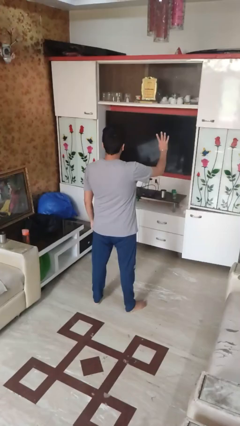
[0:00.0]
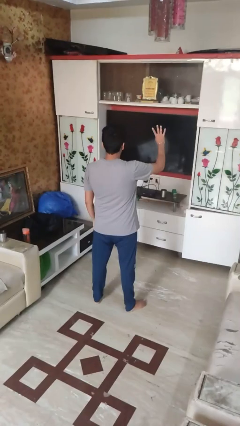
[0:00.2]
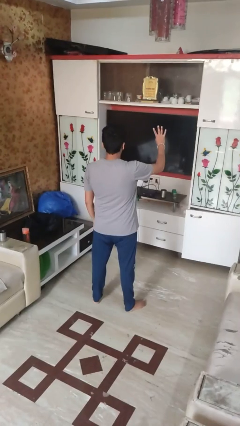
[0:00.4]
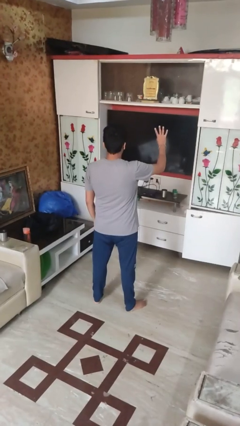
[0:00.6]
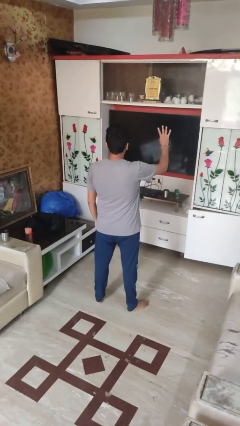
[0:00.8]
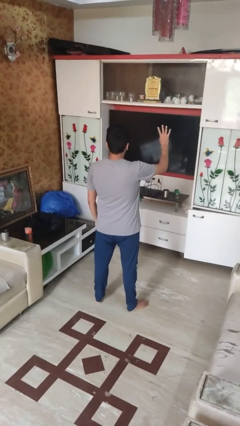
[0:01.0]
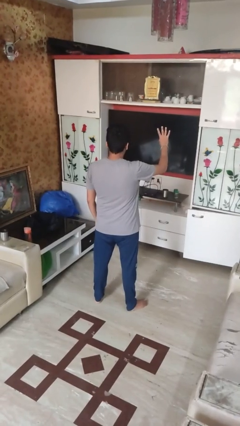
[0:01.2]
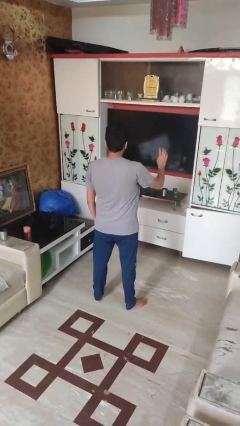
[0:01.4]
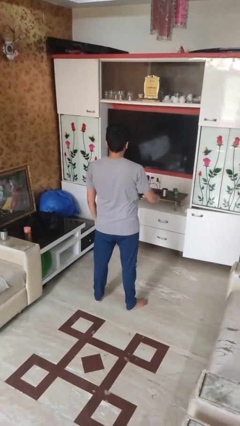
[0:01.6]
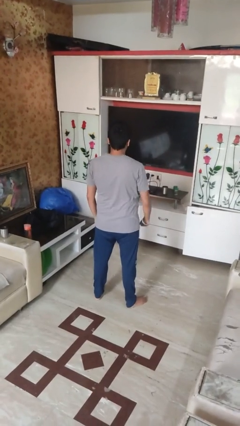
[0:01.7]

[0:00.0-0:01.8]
person gestures number four

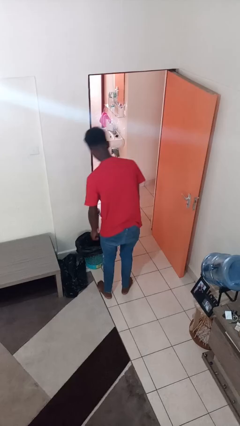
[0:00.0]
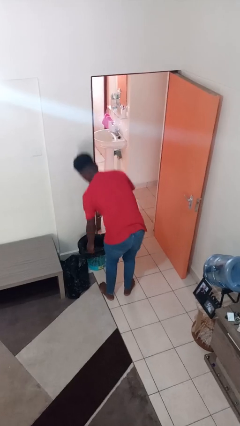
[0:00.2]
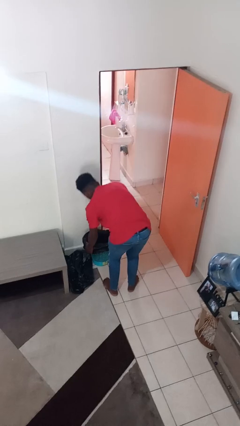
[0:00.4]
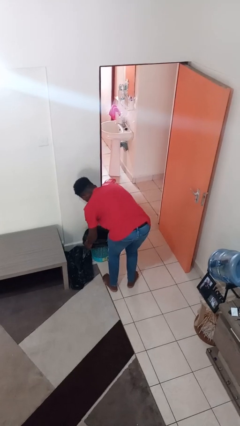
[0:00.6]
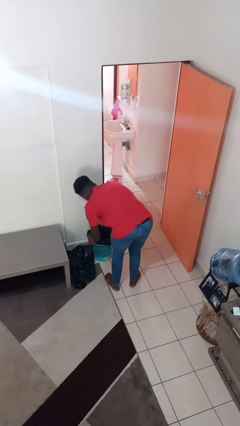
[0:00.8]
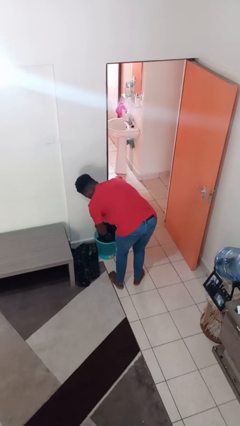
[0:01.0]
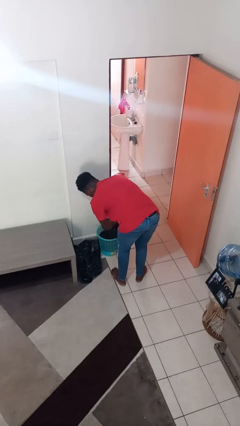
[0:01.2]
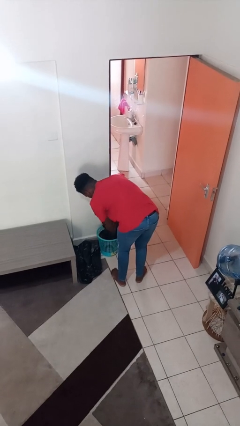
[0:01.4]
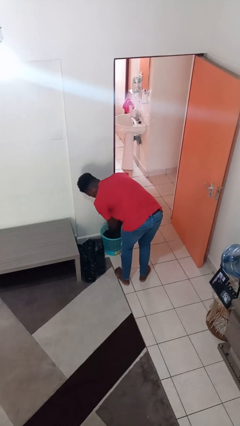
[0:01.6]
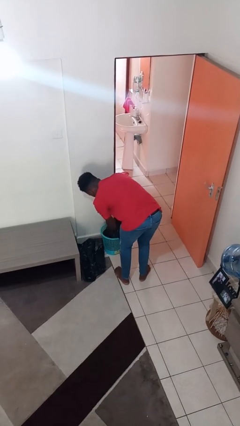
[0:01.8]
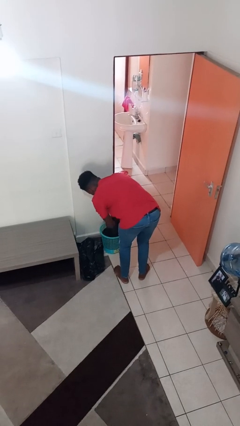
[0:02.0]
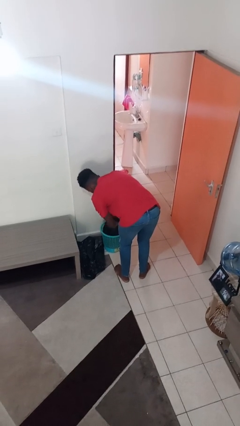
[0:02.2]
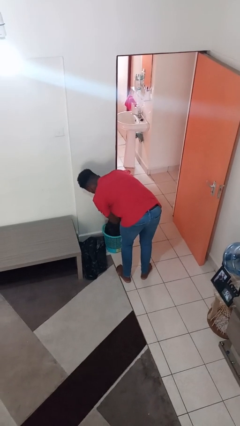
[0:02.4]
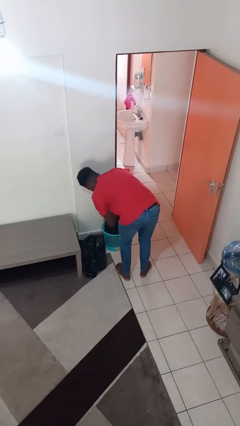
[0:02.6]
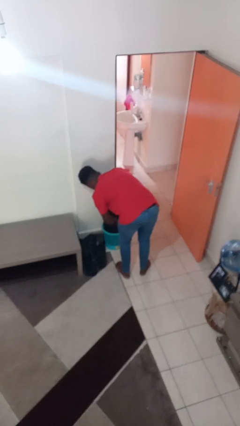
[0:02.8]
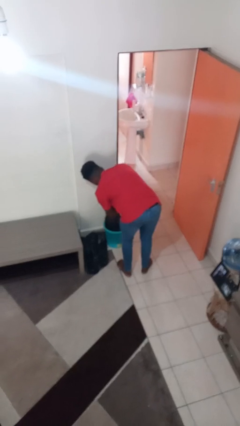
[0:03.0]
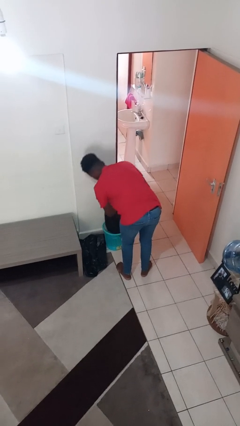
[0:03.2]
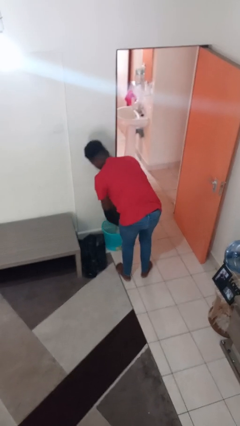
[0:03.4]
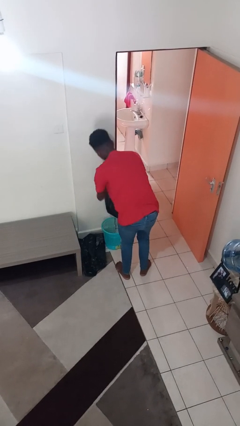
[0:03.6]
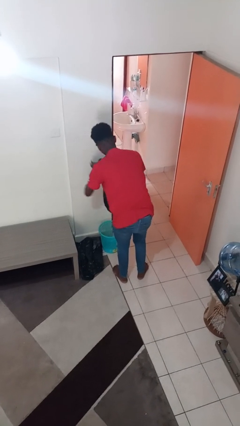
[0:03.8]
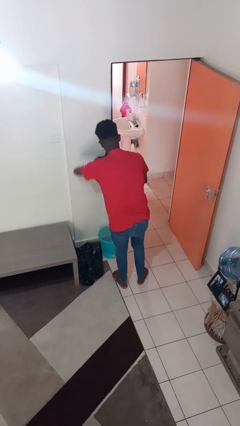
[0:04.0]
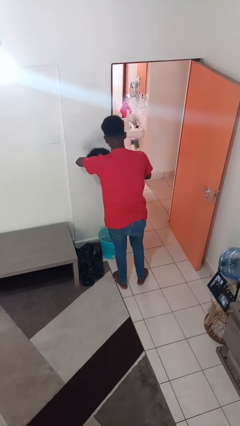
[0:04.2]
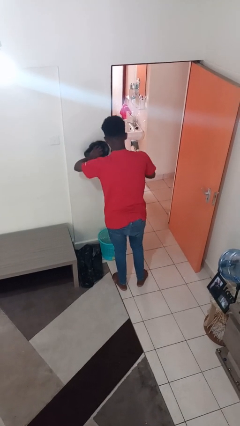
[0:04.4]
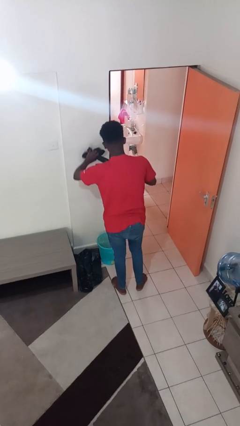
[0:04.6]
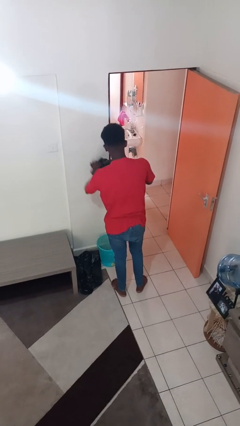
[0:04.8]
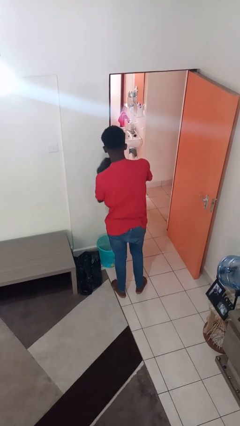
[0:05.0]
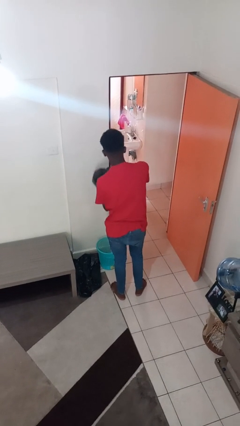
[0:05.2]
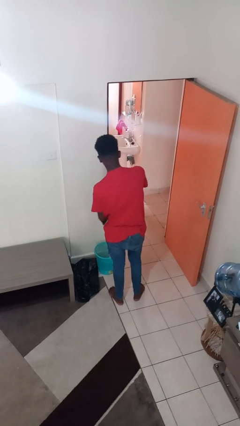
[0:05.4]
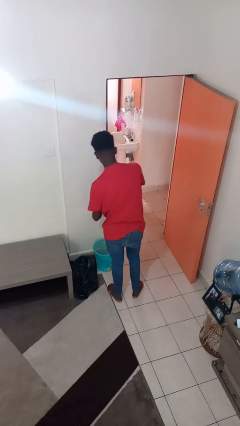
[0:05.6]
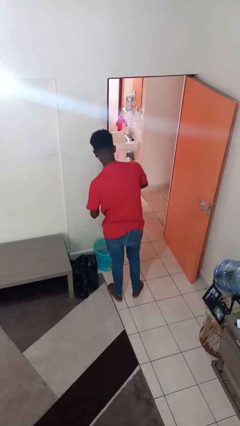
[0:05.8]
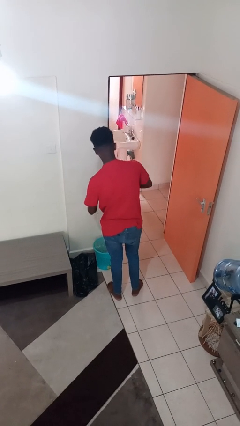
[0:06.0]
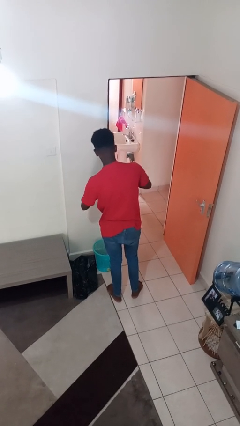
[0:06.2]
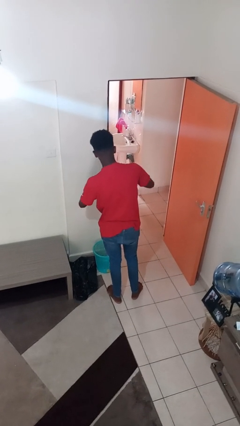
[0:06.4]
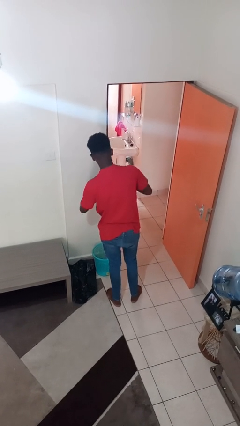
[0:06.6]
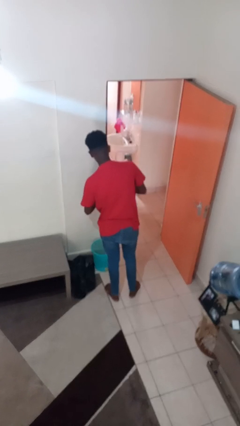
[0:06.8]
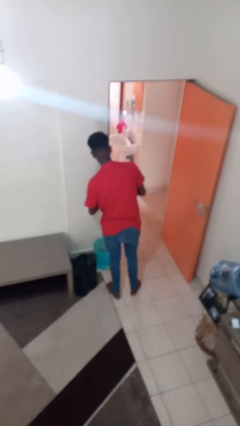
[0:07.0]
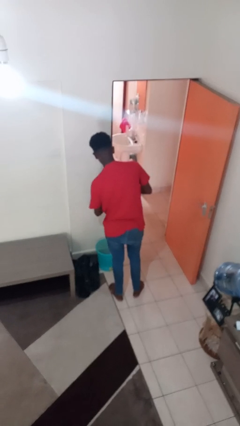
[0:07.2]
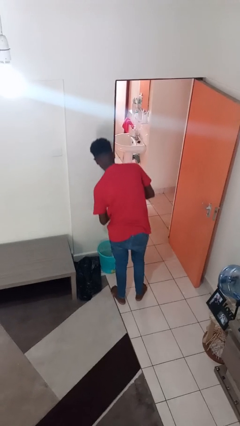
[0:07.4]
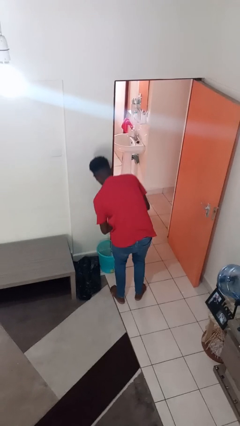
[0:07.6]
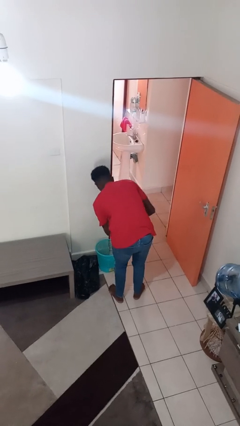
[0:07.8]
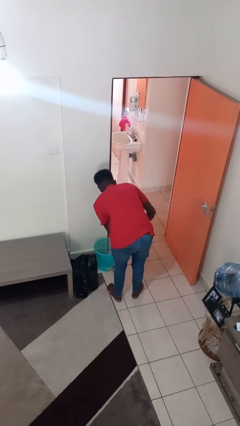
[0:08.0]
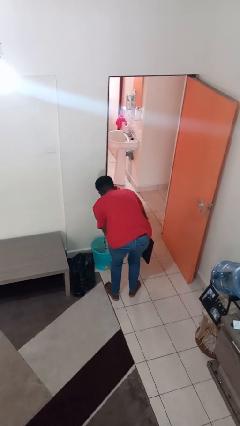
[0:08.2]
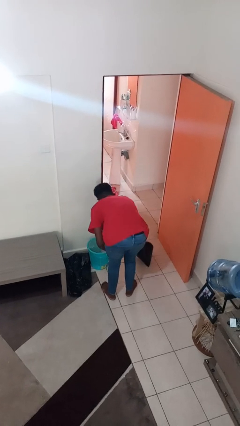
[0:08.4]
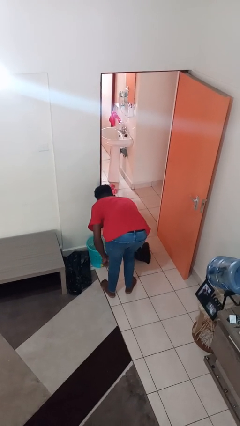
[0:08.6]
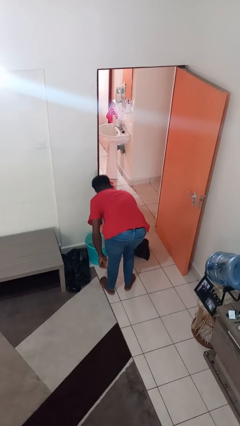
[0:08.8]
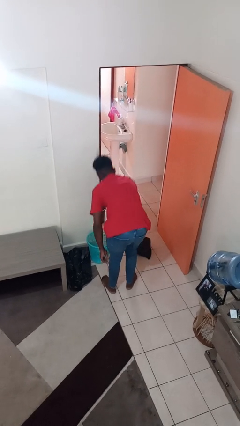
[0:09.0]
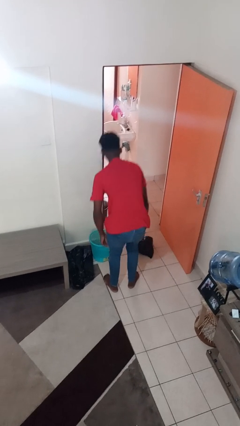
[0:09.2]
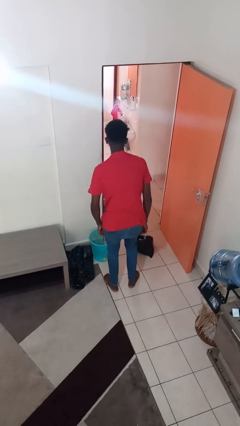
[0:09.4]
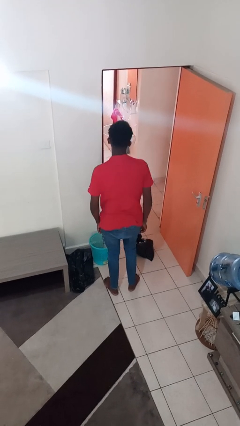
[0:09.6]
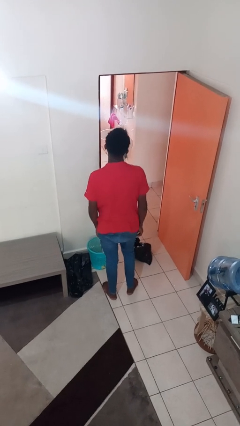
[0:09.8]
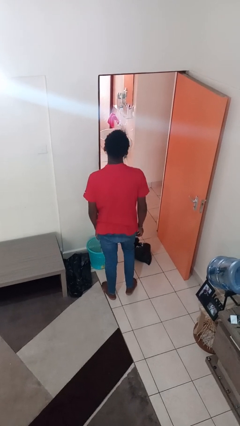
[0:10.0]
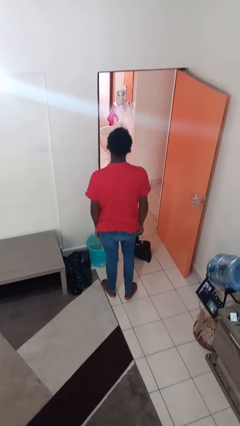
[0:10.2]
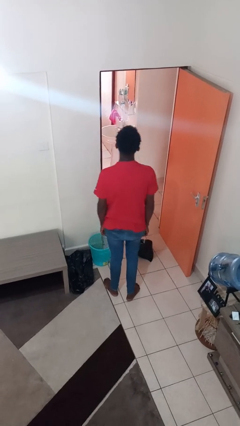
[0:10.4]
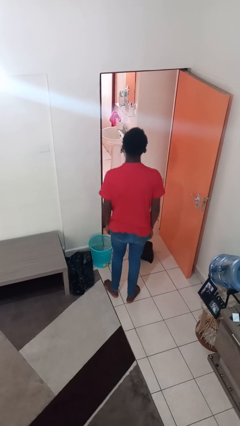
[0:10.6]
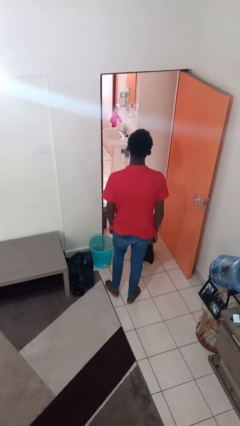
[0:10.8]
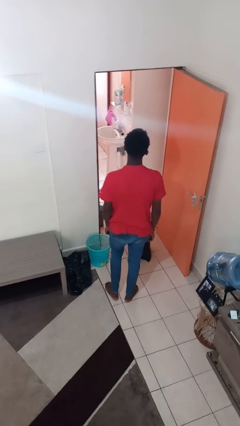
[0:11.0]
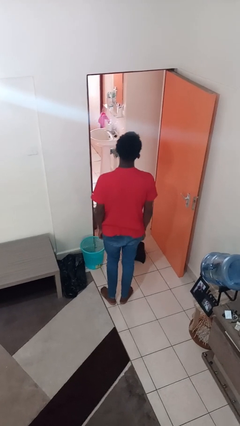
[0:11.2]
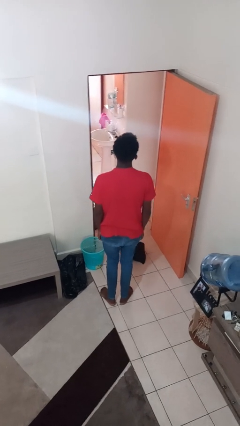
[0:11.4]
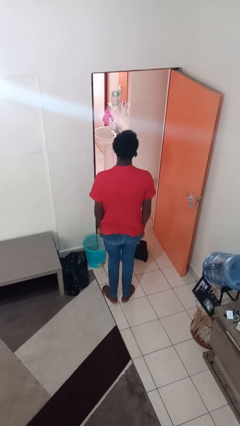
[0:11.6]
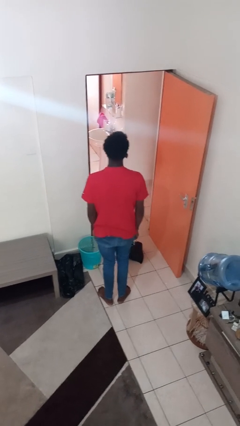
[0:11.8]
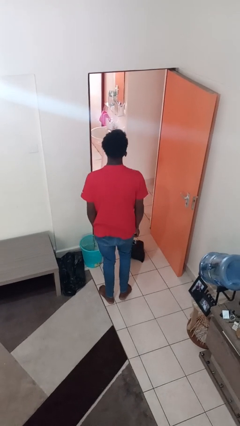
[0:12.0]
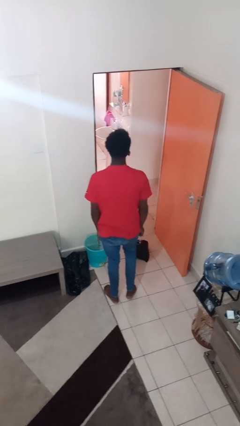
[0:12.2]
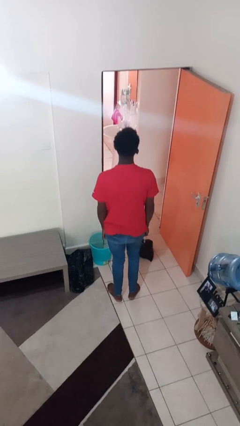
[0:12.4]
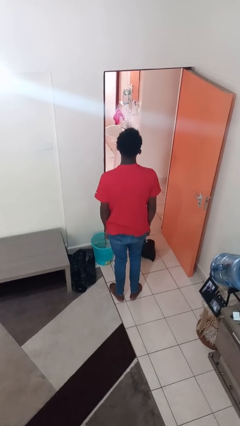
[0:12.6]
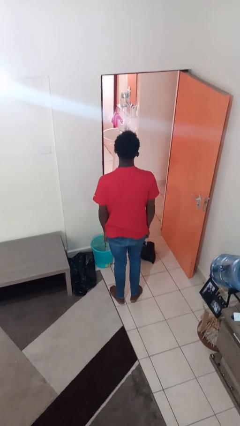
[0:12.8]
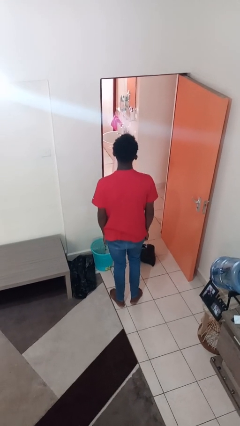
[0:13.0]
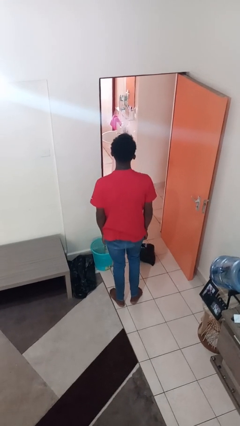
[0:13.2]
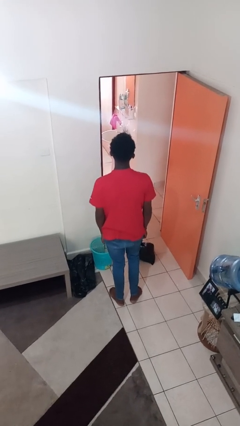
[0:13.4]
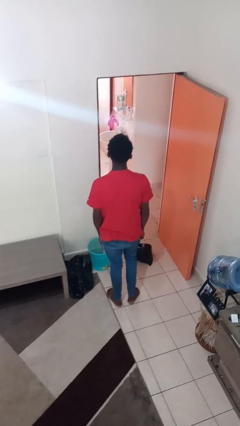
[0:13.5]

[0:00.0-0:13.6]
person removes trashbag from trashcan

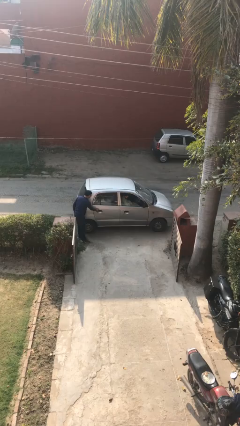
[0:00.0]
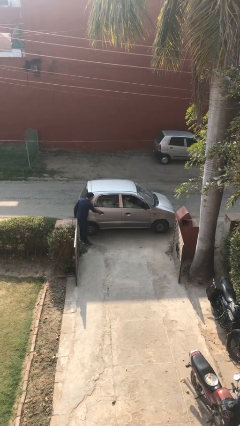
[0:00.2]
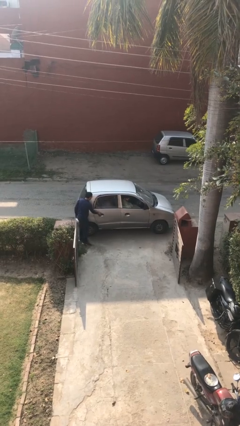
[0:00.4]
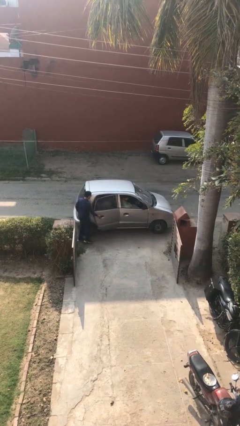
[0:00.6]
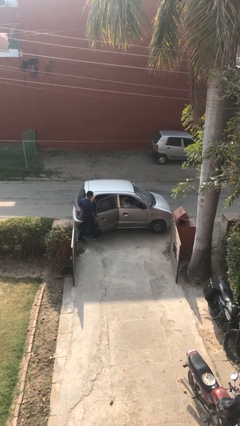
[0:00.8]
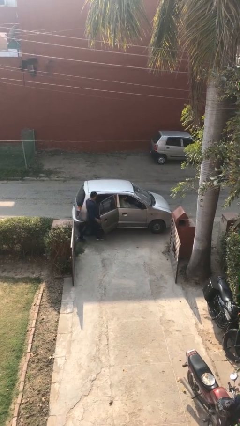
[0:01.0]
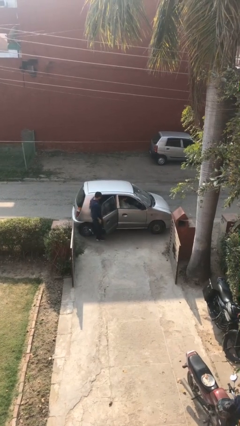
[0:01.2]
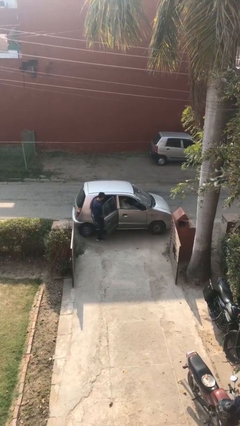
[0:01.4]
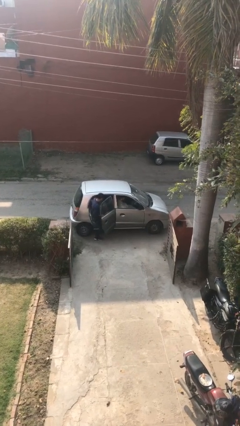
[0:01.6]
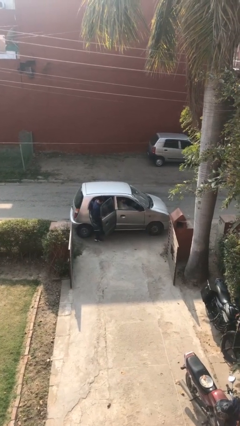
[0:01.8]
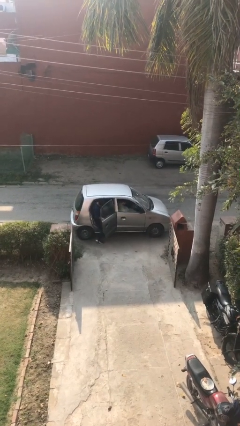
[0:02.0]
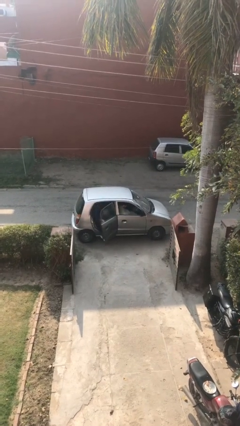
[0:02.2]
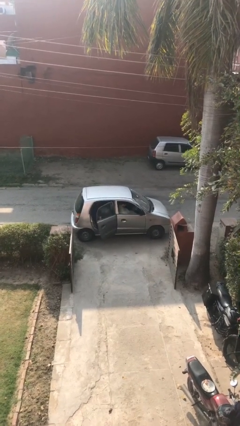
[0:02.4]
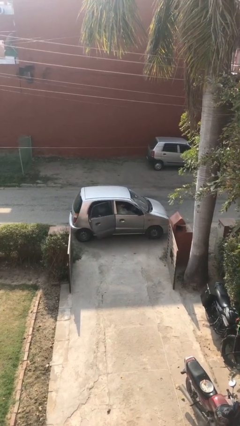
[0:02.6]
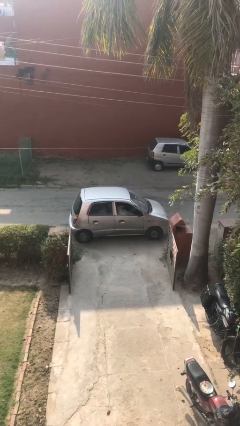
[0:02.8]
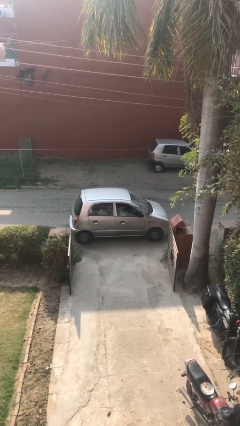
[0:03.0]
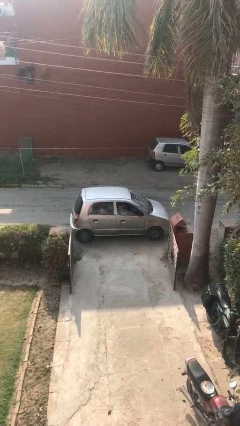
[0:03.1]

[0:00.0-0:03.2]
car picks up person
